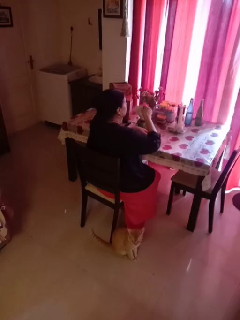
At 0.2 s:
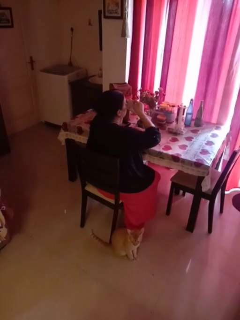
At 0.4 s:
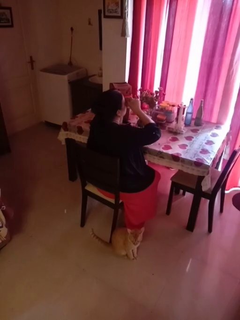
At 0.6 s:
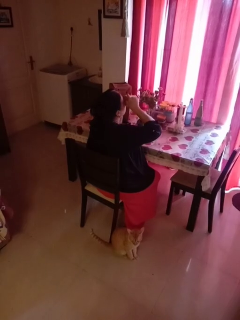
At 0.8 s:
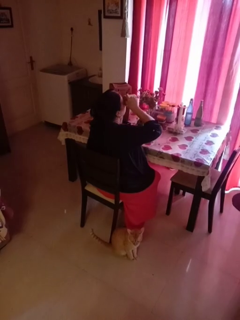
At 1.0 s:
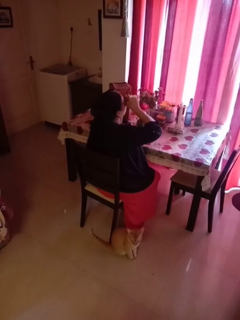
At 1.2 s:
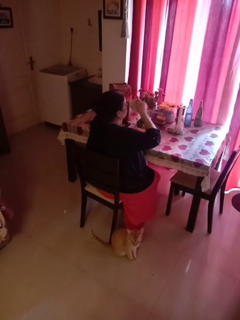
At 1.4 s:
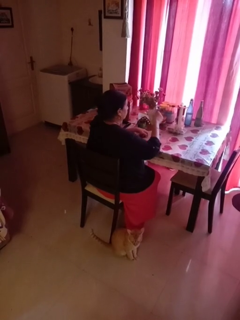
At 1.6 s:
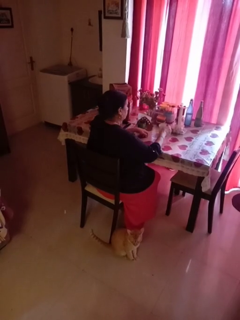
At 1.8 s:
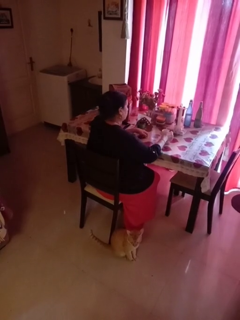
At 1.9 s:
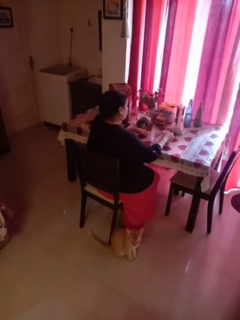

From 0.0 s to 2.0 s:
person drinks from mug

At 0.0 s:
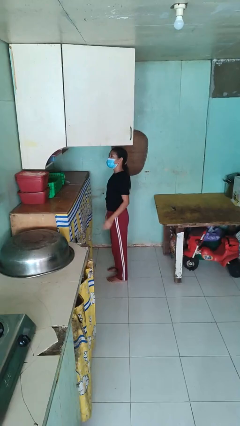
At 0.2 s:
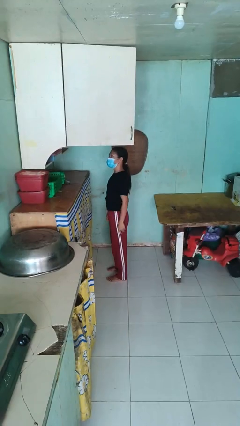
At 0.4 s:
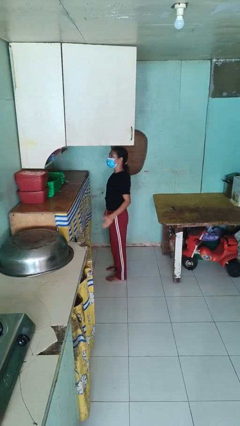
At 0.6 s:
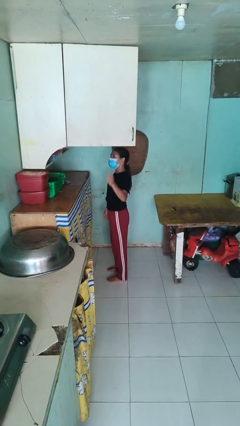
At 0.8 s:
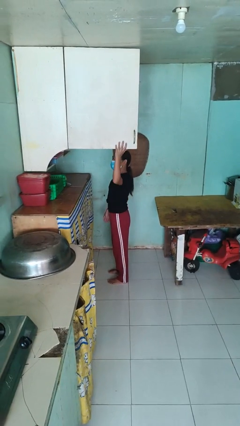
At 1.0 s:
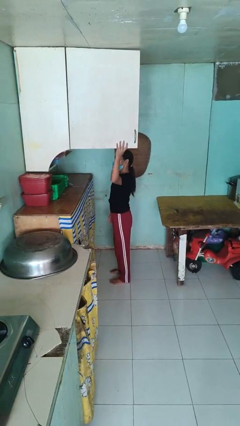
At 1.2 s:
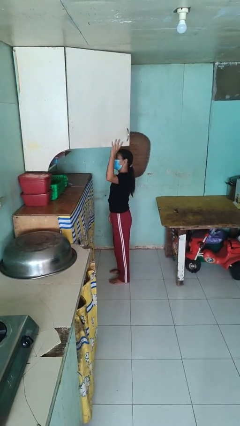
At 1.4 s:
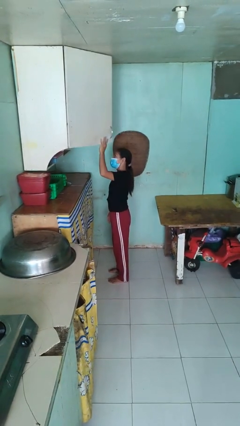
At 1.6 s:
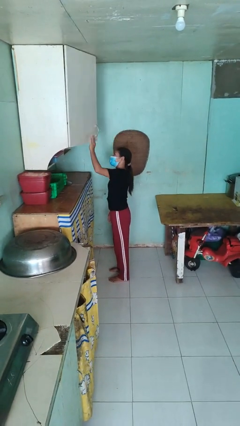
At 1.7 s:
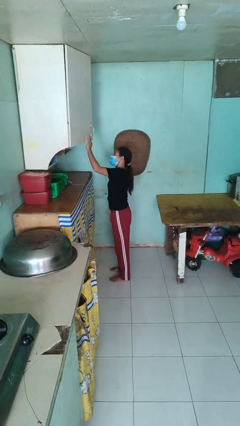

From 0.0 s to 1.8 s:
person closes cabinet

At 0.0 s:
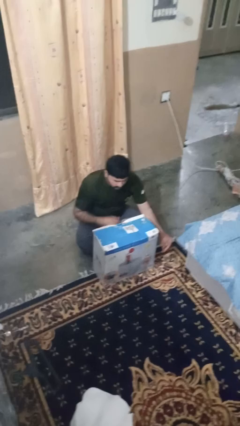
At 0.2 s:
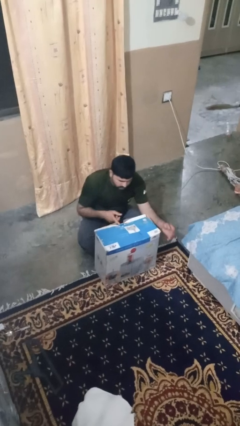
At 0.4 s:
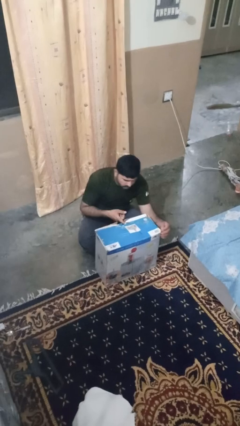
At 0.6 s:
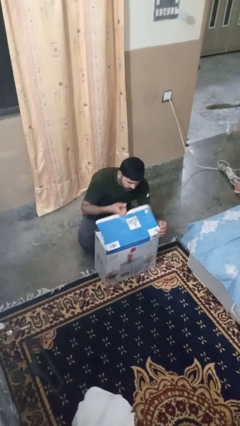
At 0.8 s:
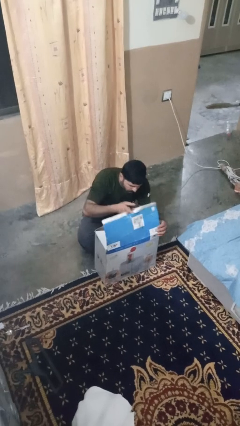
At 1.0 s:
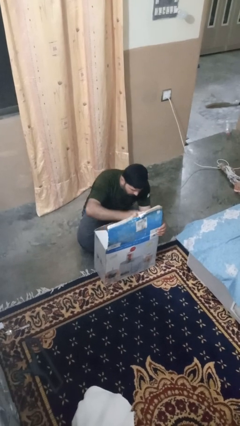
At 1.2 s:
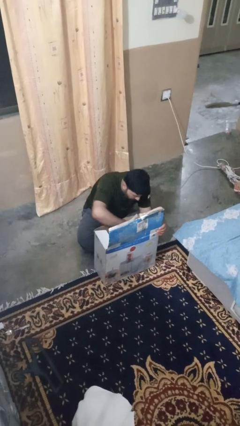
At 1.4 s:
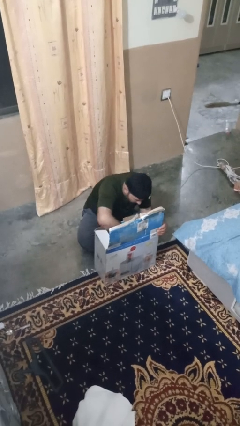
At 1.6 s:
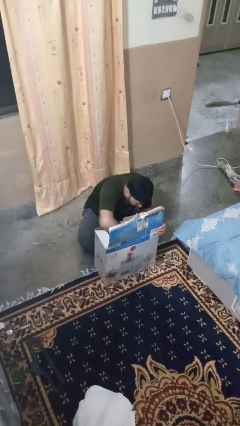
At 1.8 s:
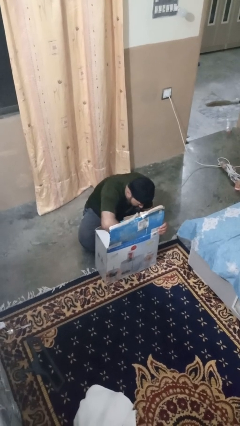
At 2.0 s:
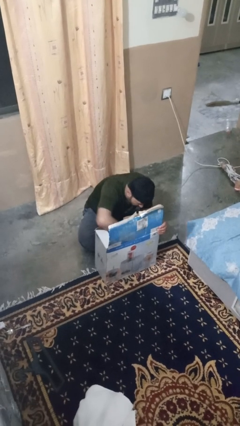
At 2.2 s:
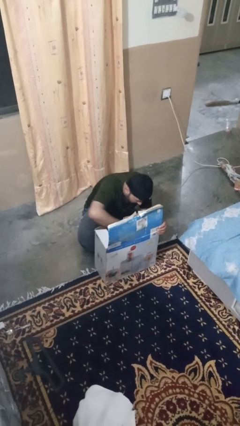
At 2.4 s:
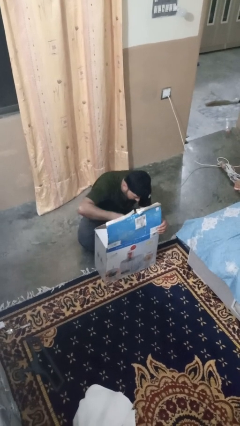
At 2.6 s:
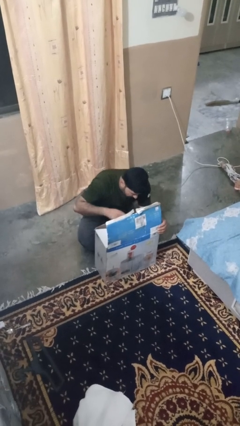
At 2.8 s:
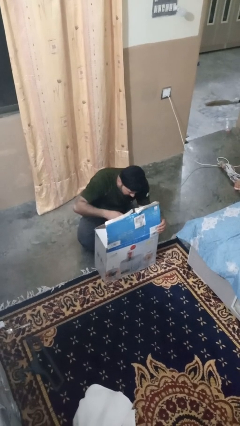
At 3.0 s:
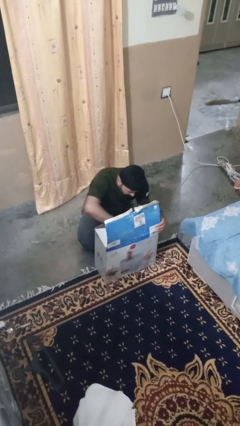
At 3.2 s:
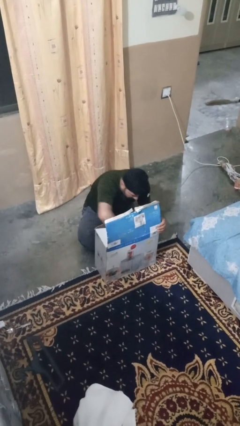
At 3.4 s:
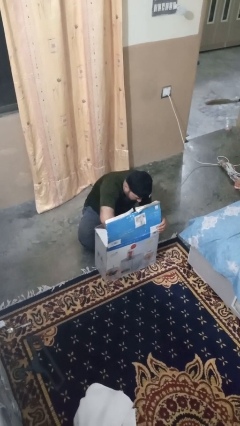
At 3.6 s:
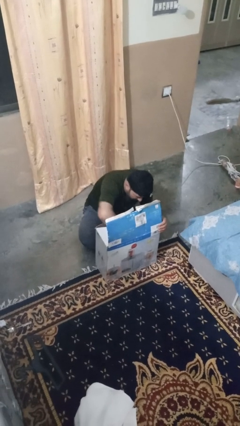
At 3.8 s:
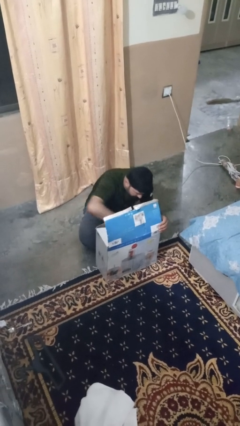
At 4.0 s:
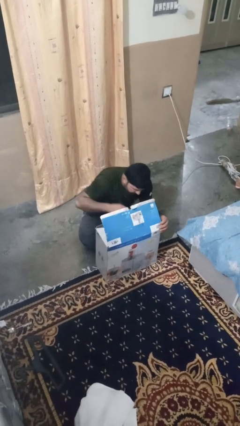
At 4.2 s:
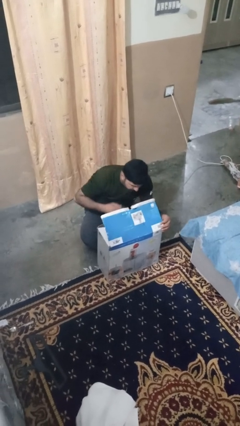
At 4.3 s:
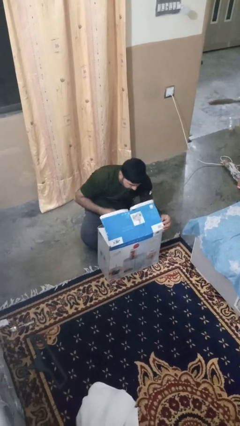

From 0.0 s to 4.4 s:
person searches in box

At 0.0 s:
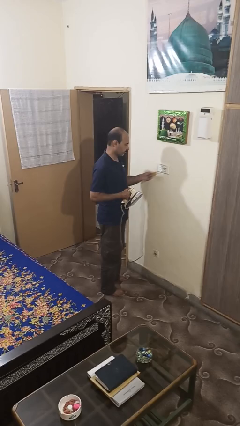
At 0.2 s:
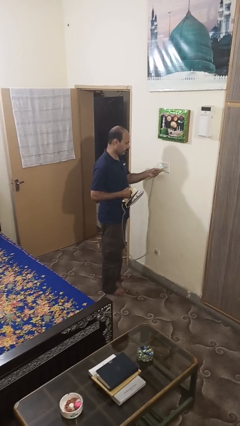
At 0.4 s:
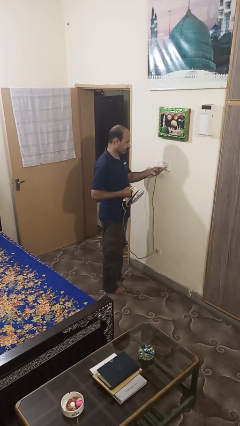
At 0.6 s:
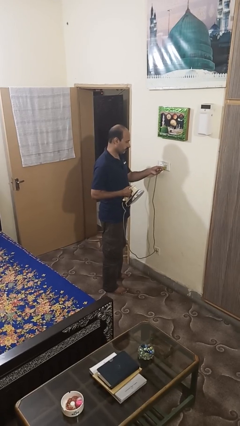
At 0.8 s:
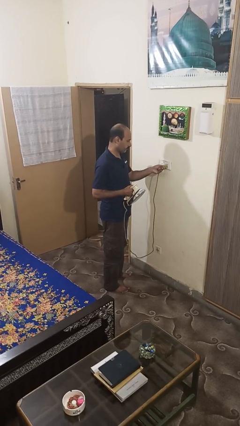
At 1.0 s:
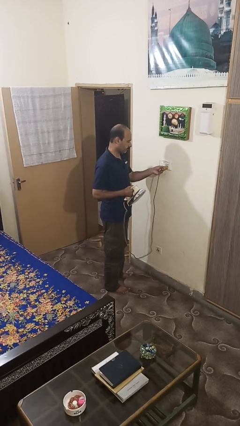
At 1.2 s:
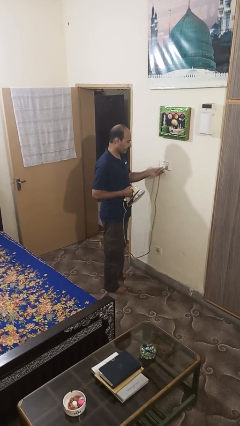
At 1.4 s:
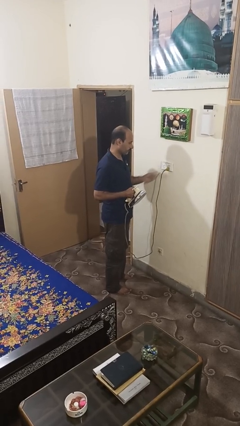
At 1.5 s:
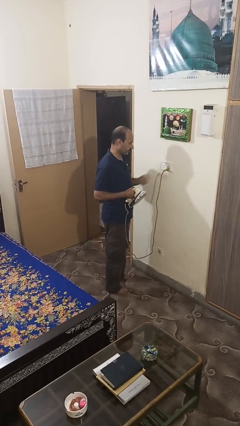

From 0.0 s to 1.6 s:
person plugs into electrical socket

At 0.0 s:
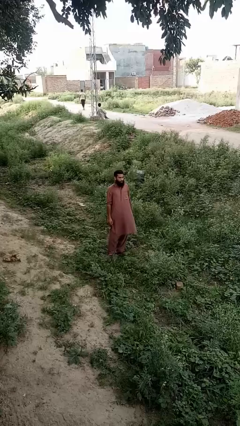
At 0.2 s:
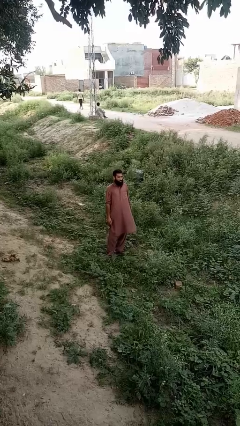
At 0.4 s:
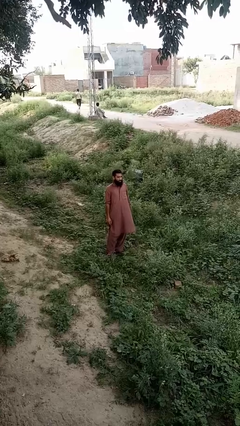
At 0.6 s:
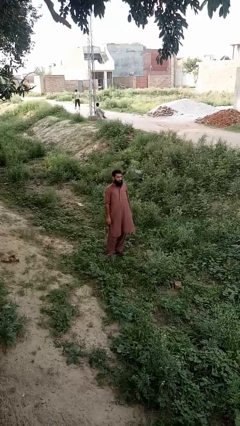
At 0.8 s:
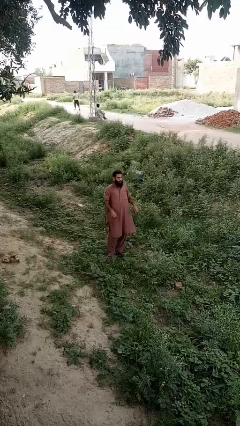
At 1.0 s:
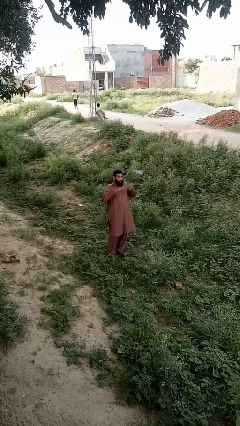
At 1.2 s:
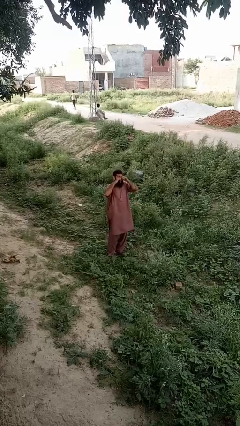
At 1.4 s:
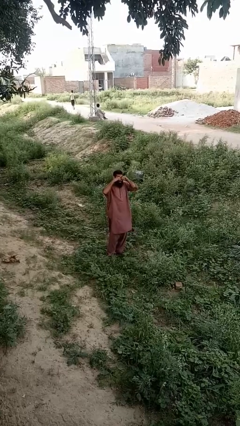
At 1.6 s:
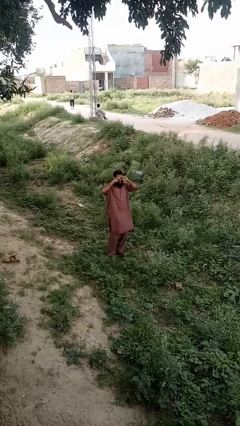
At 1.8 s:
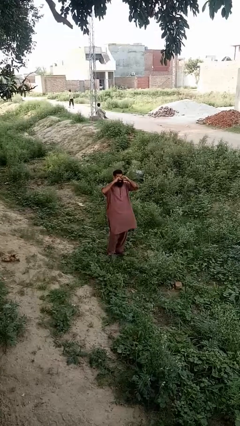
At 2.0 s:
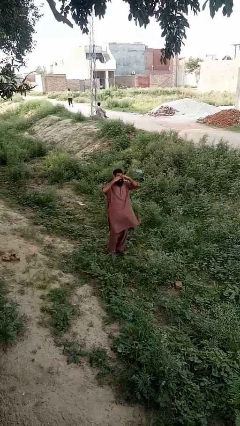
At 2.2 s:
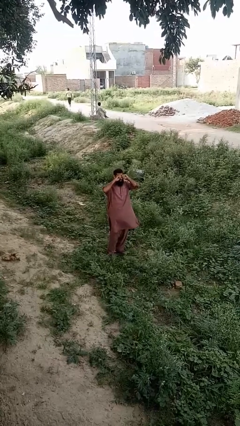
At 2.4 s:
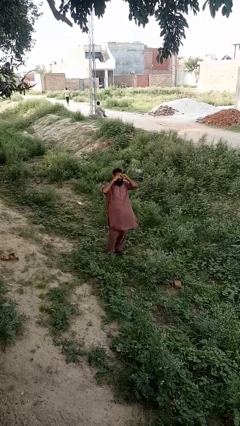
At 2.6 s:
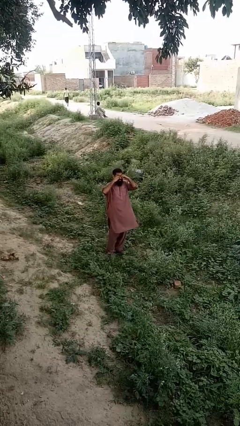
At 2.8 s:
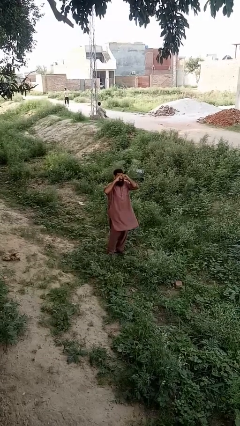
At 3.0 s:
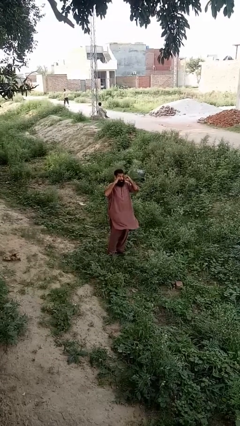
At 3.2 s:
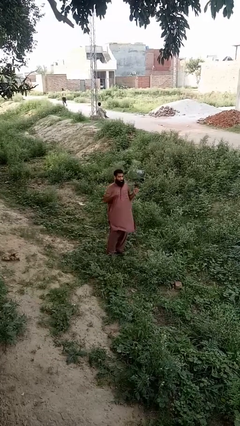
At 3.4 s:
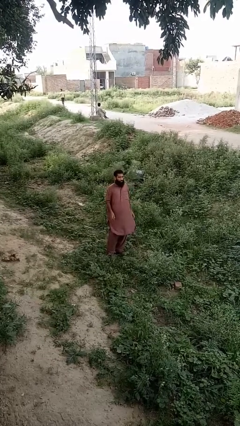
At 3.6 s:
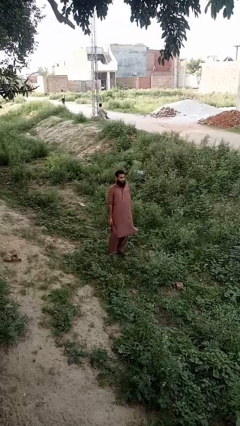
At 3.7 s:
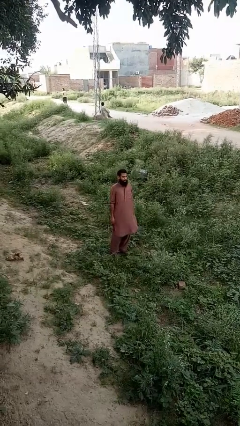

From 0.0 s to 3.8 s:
person rubs eyes

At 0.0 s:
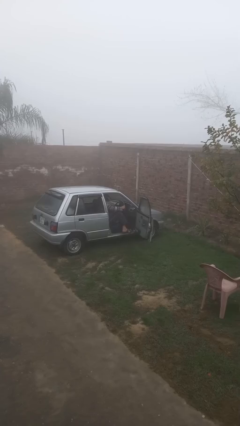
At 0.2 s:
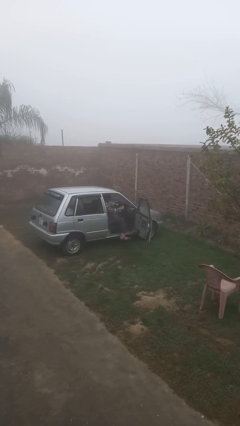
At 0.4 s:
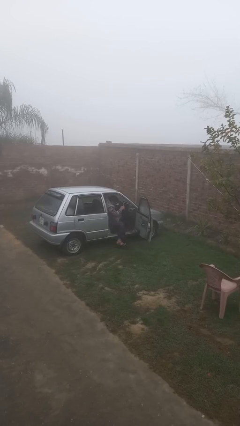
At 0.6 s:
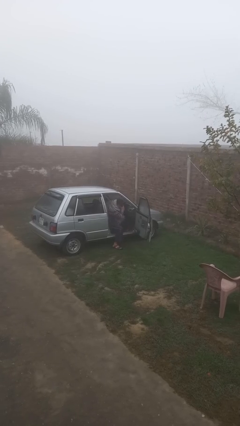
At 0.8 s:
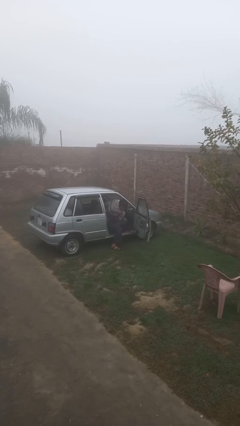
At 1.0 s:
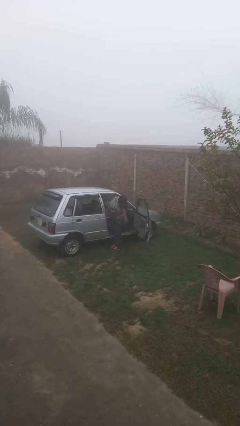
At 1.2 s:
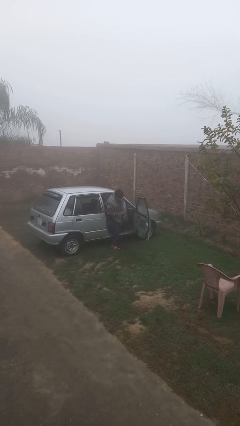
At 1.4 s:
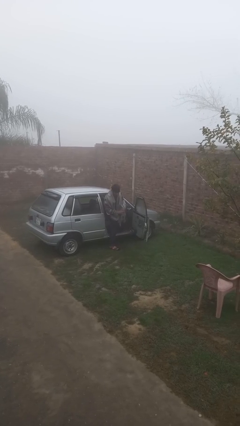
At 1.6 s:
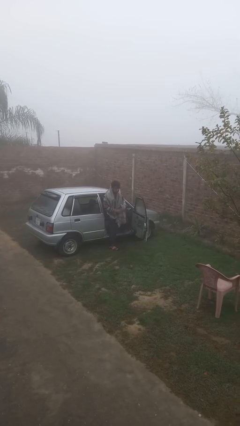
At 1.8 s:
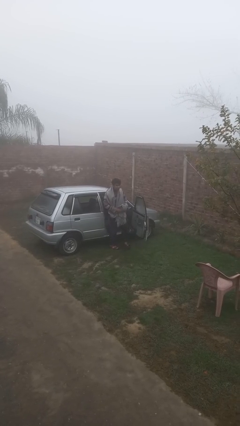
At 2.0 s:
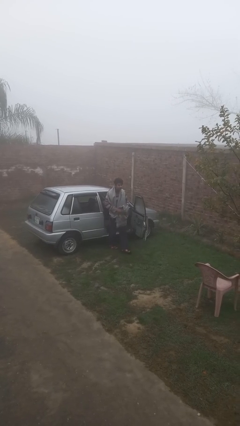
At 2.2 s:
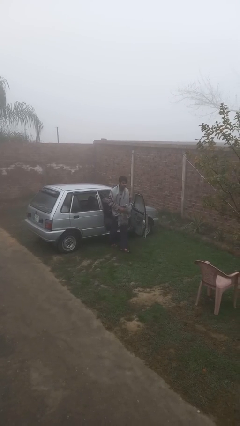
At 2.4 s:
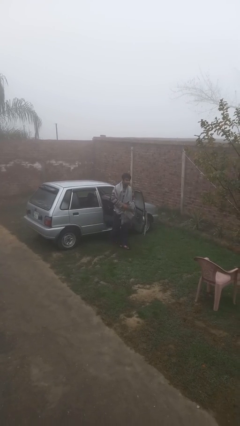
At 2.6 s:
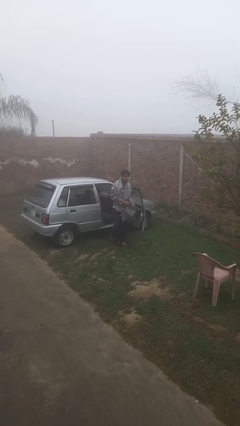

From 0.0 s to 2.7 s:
person exits car

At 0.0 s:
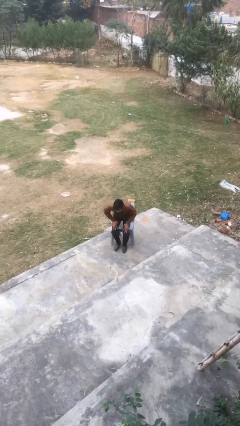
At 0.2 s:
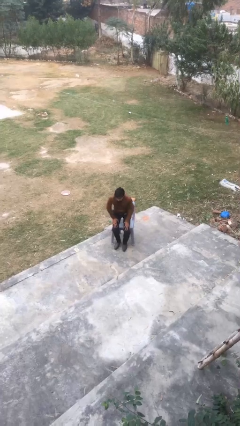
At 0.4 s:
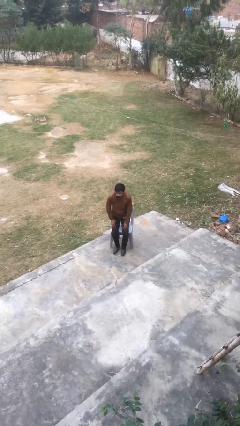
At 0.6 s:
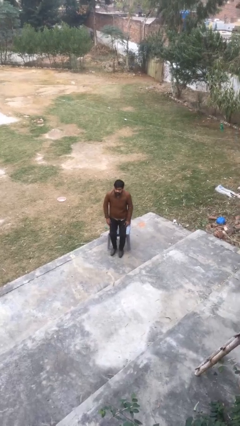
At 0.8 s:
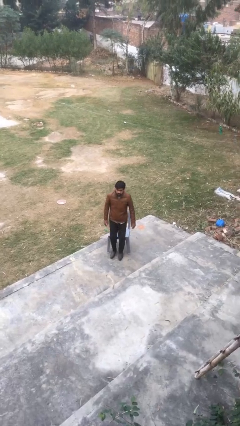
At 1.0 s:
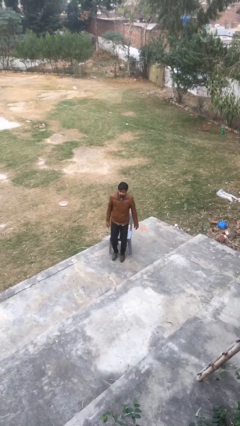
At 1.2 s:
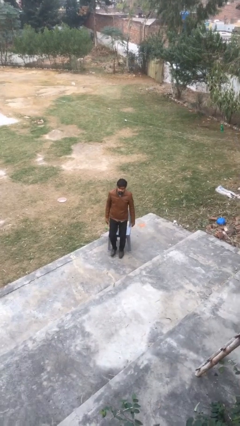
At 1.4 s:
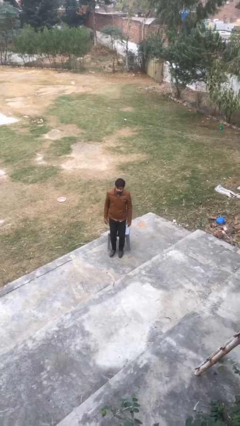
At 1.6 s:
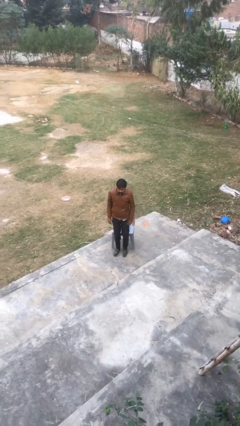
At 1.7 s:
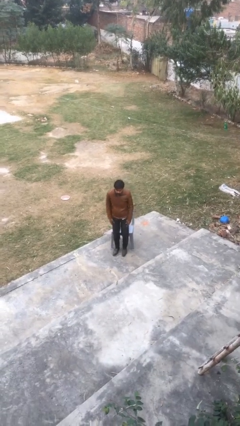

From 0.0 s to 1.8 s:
person stands up
